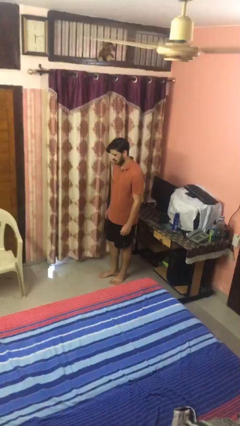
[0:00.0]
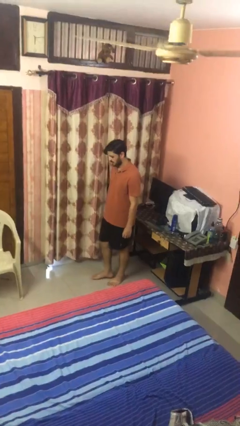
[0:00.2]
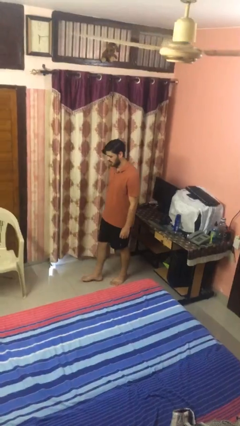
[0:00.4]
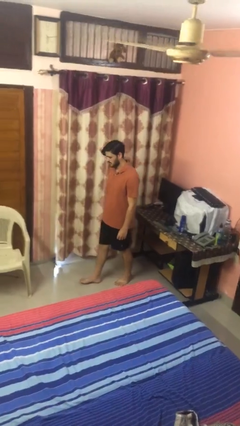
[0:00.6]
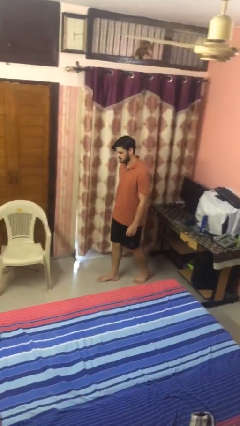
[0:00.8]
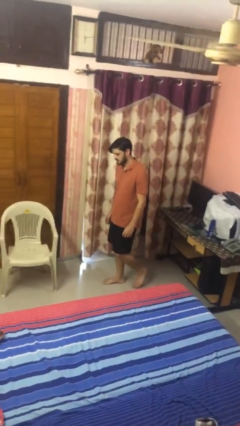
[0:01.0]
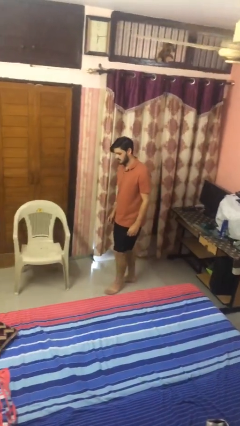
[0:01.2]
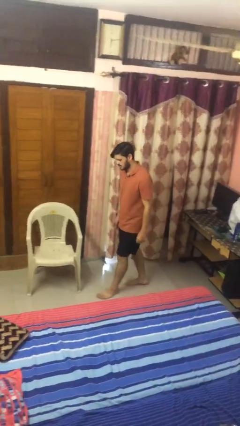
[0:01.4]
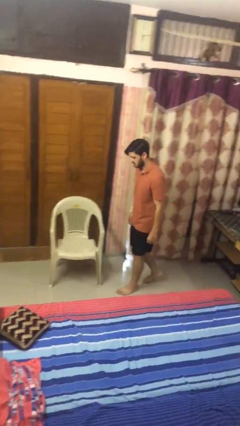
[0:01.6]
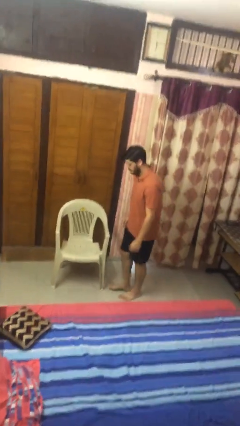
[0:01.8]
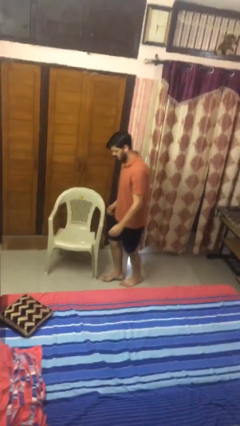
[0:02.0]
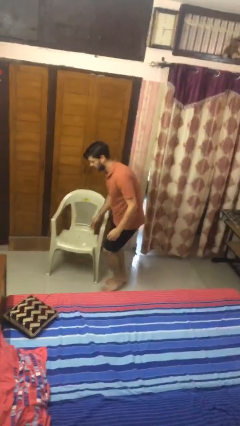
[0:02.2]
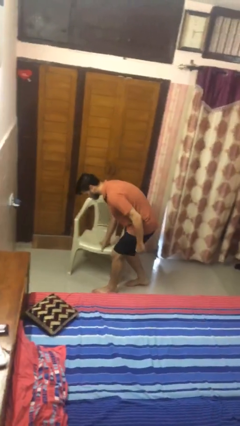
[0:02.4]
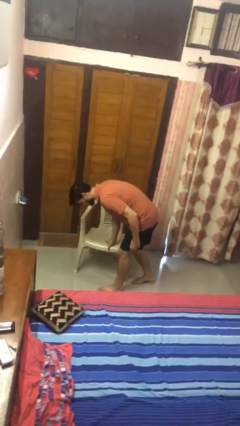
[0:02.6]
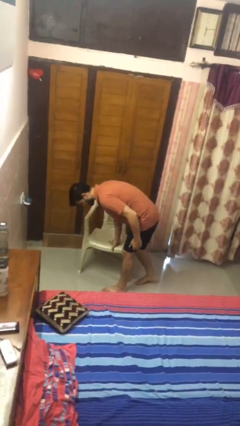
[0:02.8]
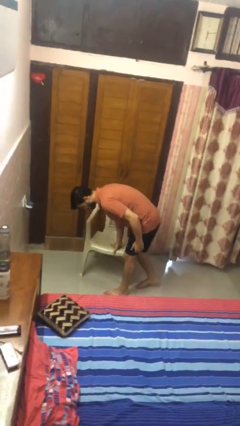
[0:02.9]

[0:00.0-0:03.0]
person stubs toe

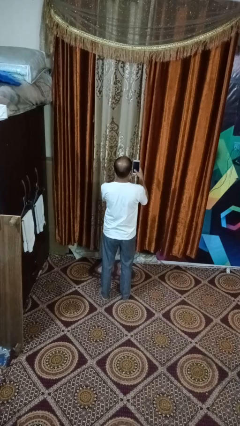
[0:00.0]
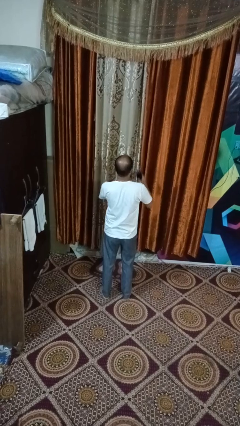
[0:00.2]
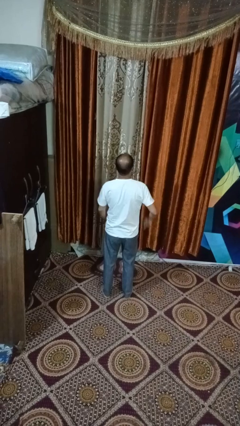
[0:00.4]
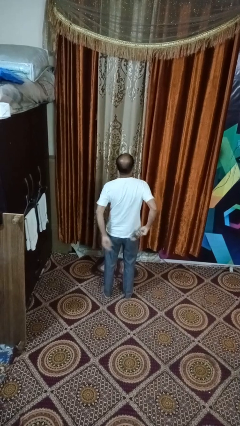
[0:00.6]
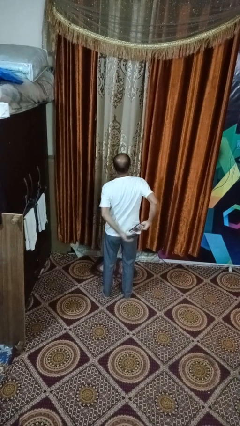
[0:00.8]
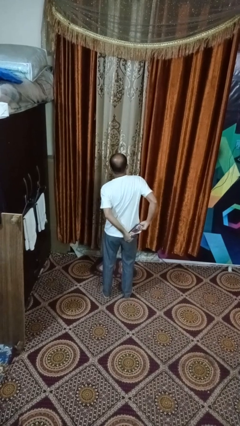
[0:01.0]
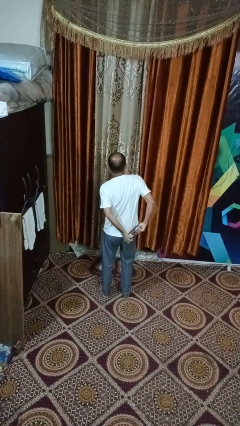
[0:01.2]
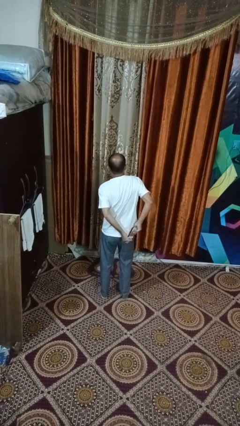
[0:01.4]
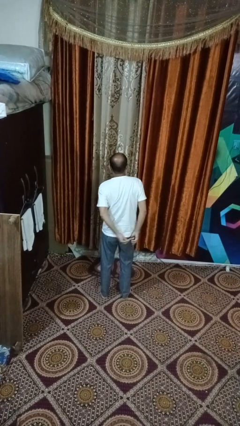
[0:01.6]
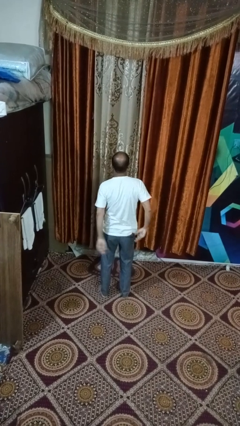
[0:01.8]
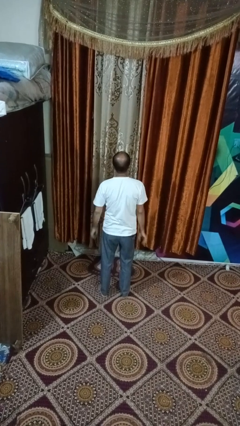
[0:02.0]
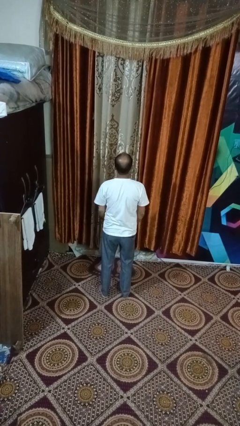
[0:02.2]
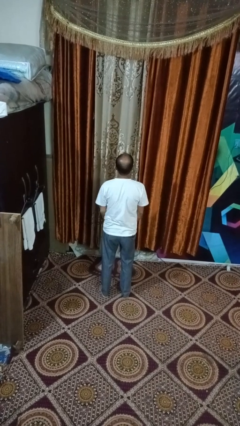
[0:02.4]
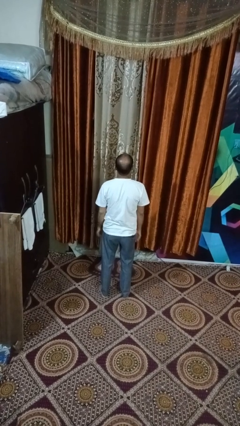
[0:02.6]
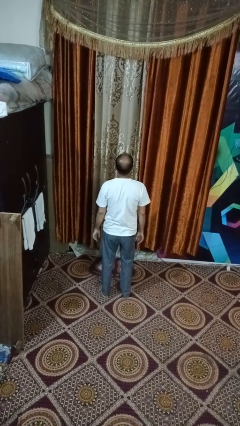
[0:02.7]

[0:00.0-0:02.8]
person puts phone into pocket

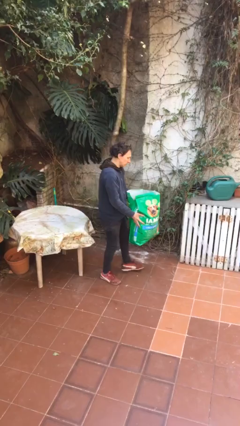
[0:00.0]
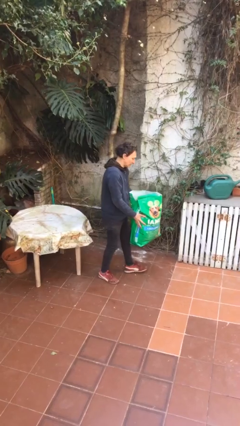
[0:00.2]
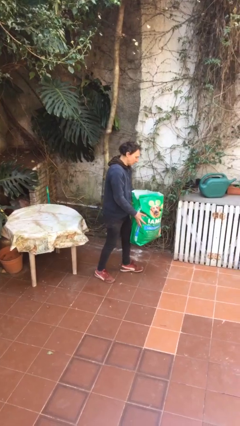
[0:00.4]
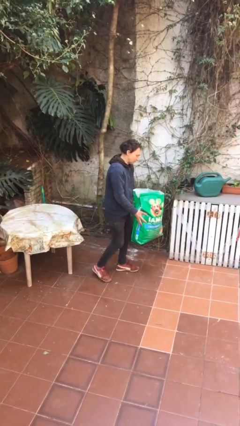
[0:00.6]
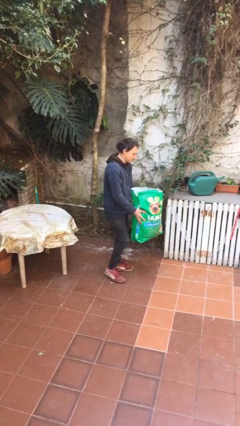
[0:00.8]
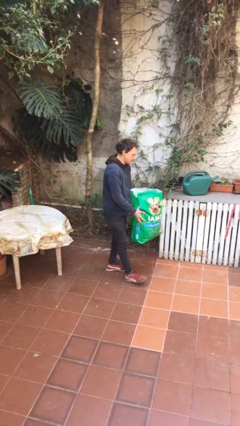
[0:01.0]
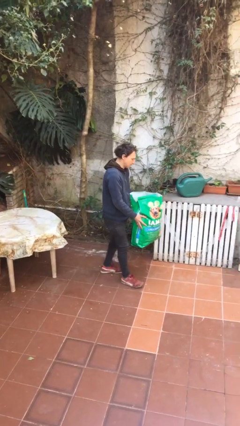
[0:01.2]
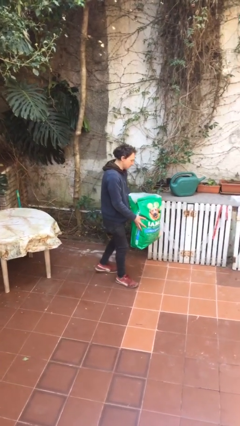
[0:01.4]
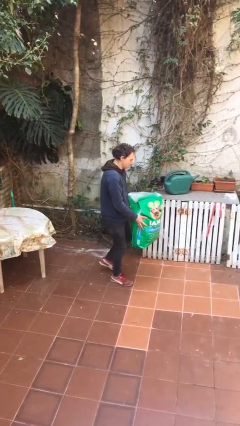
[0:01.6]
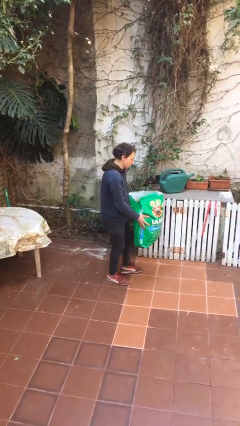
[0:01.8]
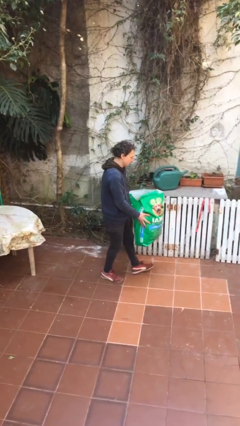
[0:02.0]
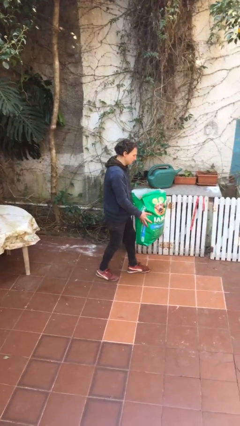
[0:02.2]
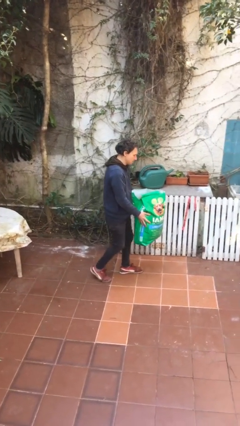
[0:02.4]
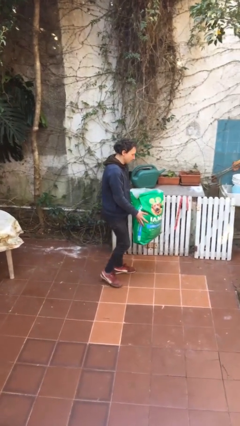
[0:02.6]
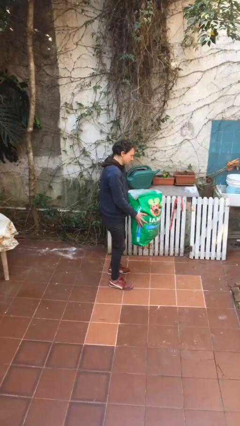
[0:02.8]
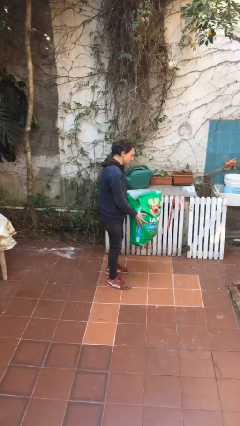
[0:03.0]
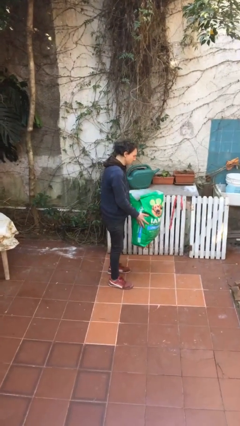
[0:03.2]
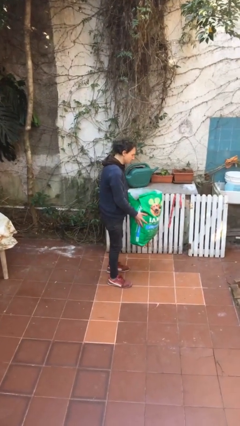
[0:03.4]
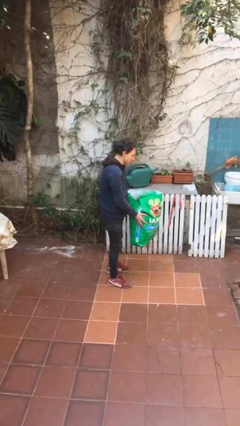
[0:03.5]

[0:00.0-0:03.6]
person carries heavy object

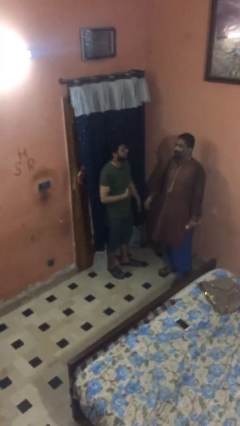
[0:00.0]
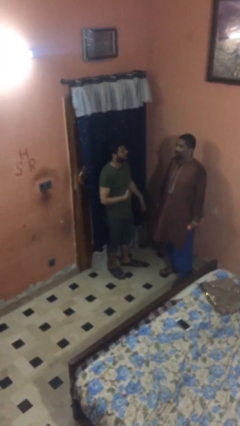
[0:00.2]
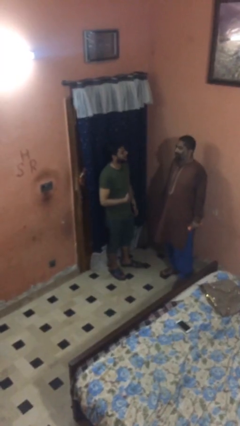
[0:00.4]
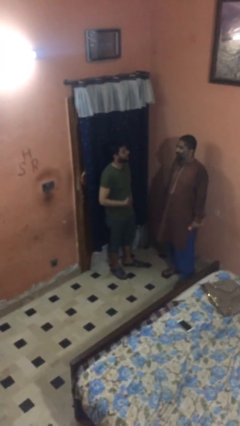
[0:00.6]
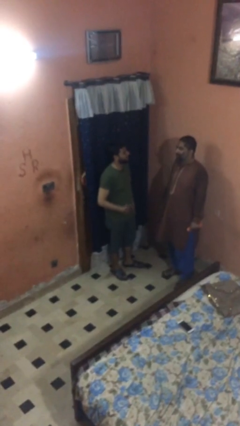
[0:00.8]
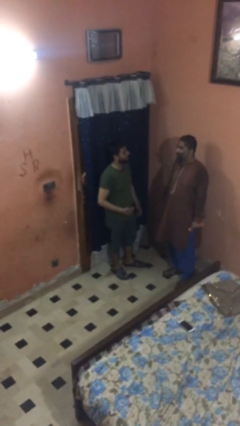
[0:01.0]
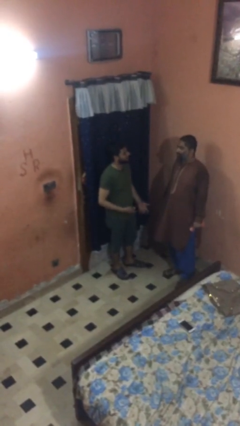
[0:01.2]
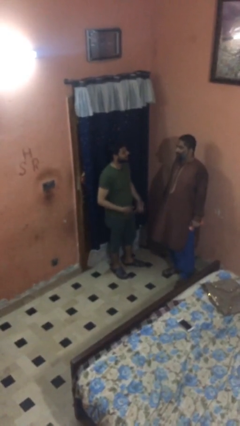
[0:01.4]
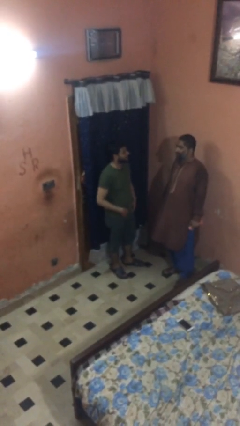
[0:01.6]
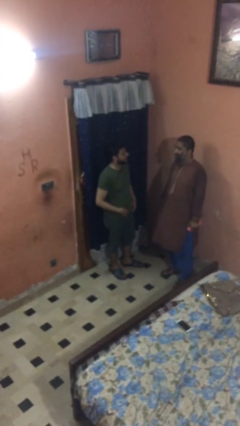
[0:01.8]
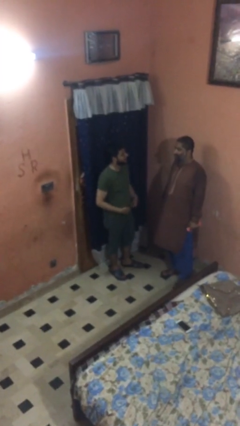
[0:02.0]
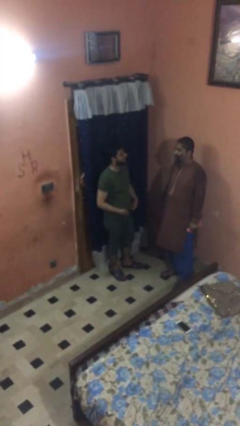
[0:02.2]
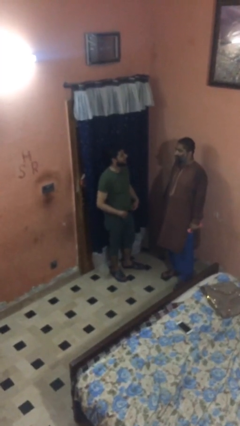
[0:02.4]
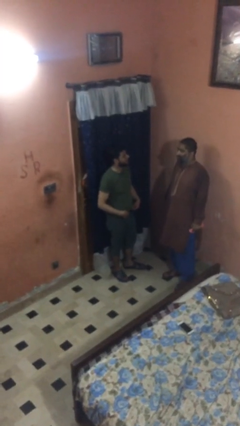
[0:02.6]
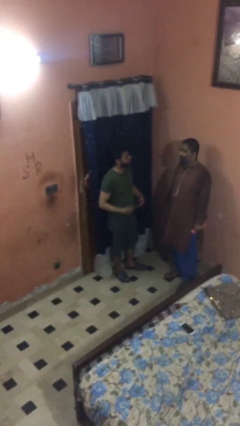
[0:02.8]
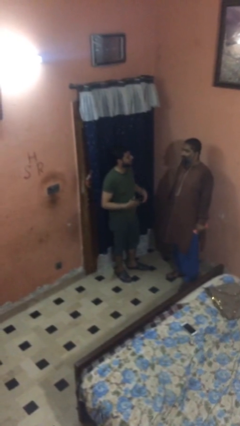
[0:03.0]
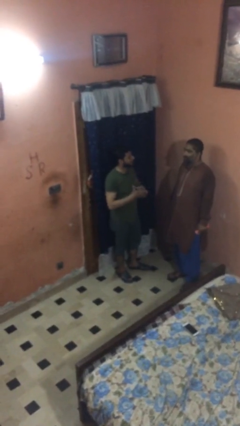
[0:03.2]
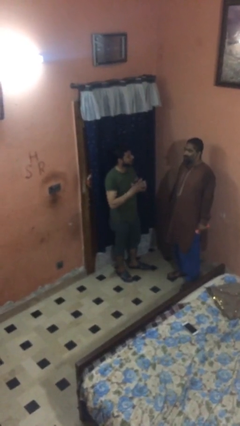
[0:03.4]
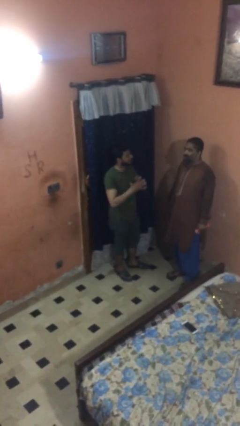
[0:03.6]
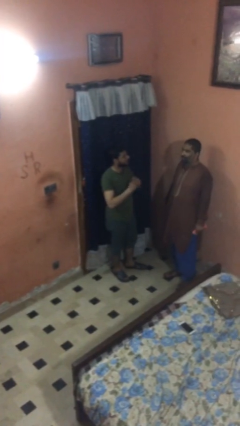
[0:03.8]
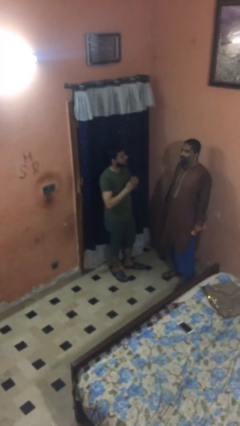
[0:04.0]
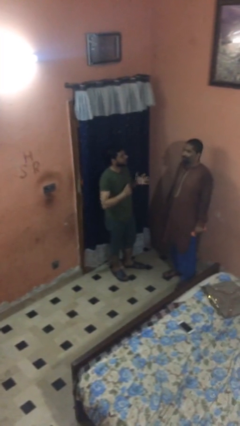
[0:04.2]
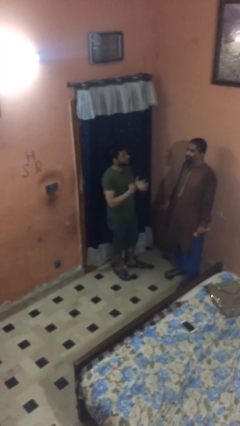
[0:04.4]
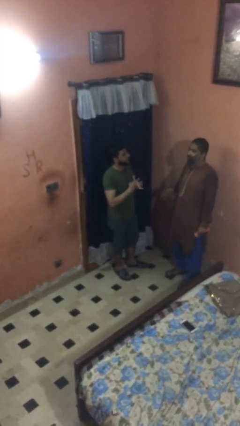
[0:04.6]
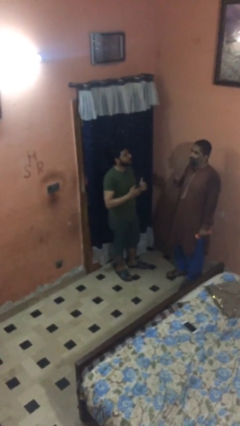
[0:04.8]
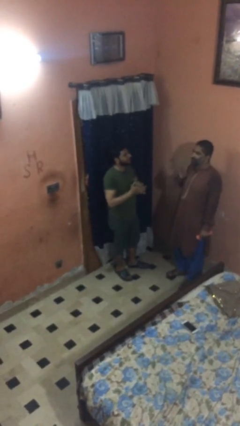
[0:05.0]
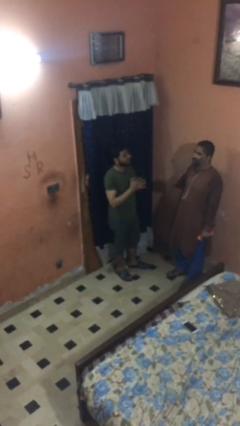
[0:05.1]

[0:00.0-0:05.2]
person talks to person

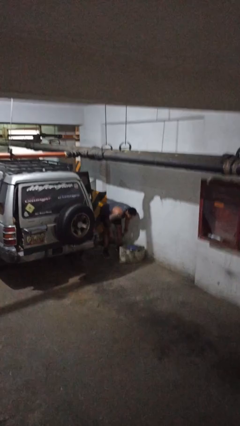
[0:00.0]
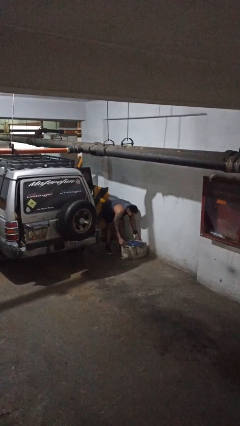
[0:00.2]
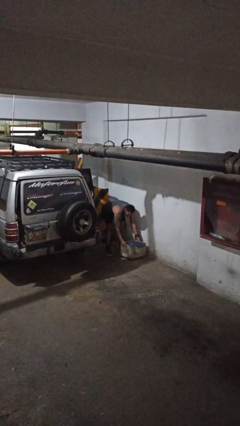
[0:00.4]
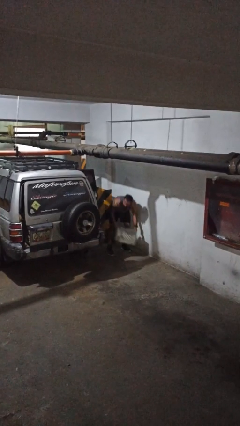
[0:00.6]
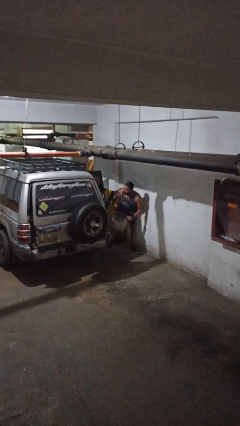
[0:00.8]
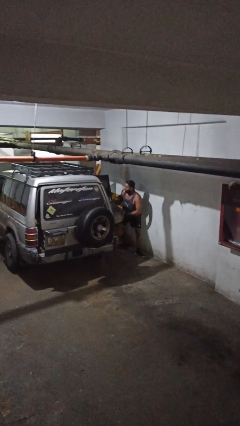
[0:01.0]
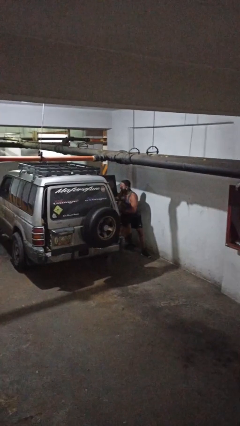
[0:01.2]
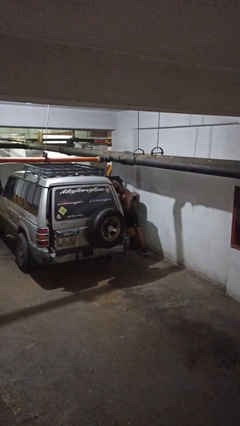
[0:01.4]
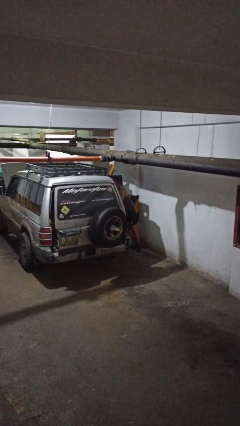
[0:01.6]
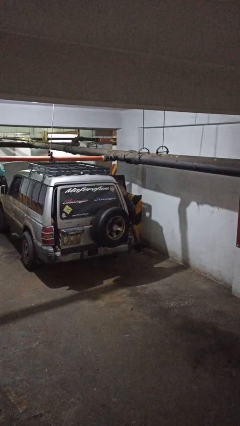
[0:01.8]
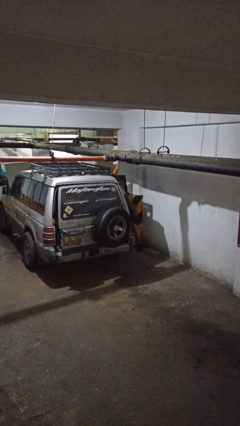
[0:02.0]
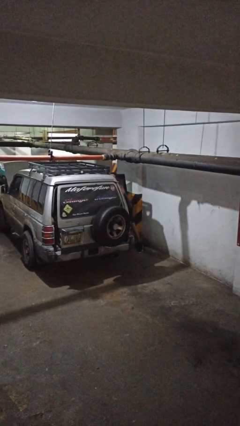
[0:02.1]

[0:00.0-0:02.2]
person loads car

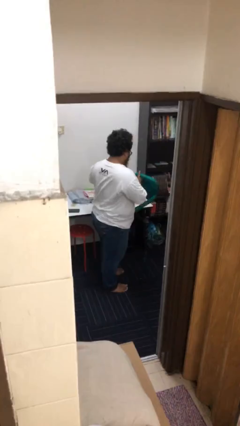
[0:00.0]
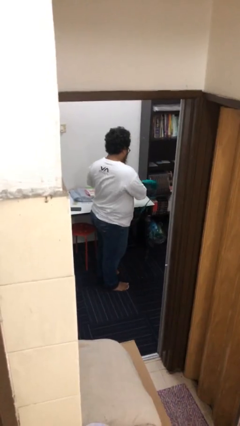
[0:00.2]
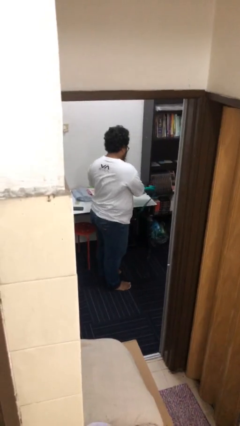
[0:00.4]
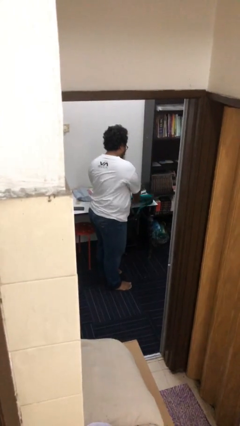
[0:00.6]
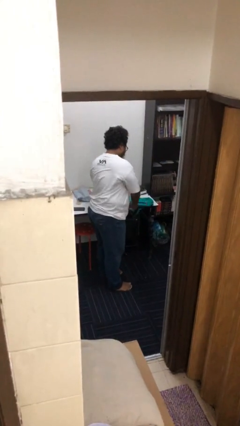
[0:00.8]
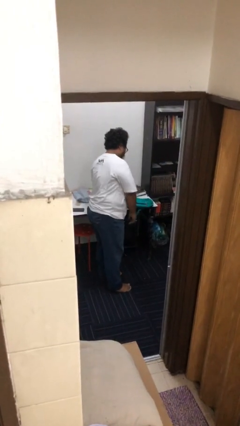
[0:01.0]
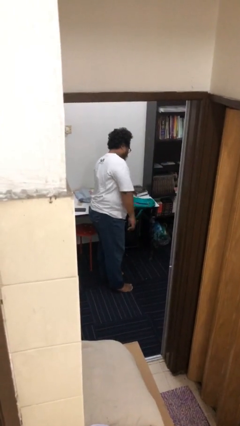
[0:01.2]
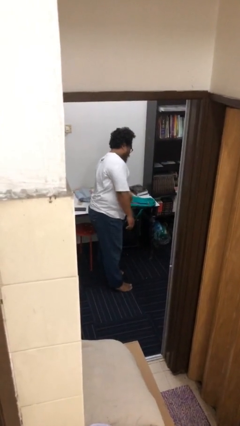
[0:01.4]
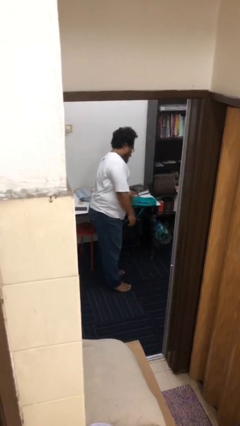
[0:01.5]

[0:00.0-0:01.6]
person puts down object on table
